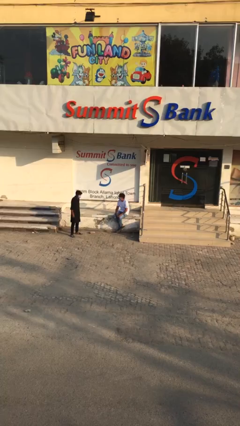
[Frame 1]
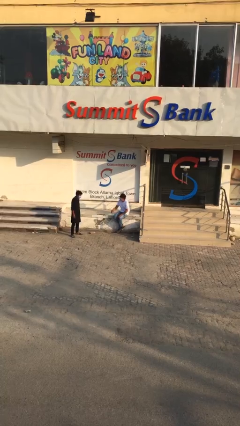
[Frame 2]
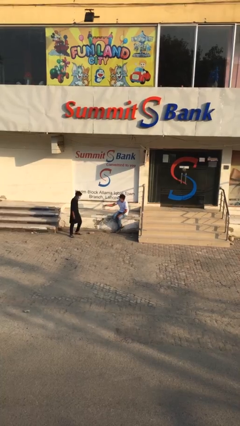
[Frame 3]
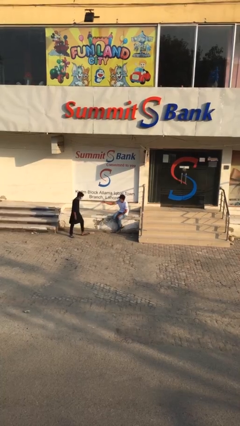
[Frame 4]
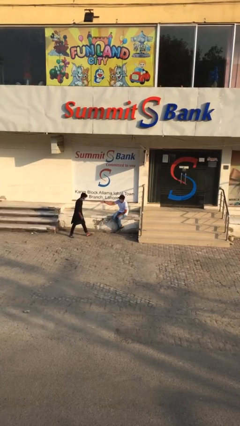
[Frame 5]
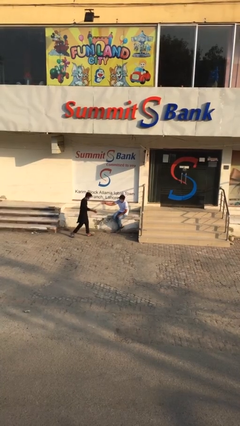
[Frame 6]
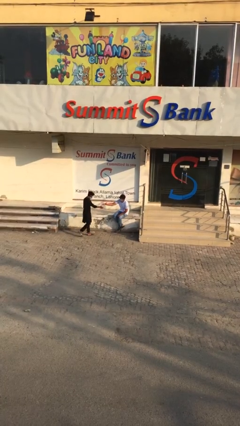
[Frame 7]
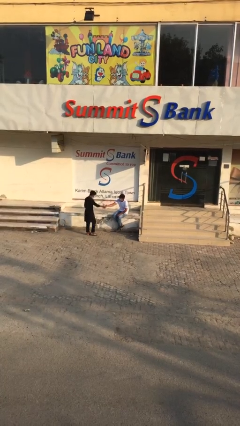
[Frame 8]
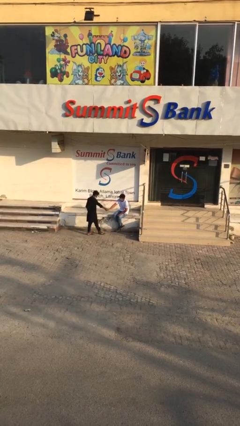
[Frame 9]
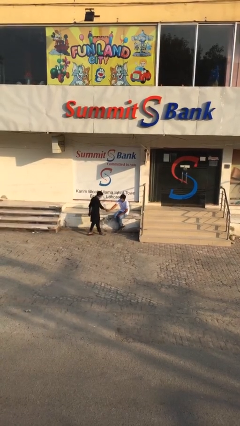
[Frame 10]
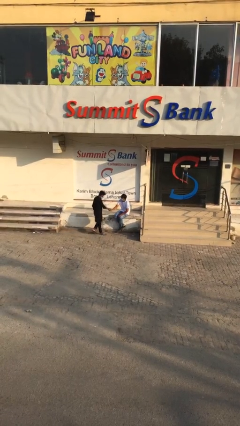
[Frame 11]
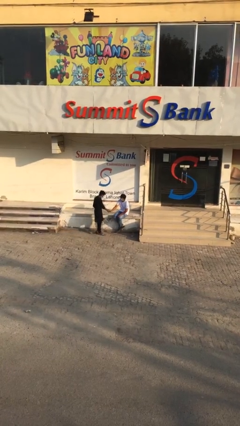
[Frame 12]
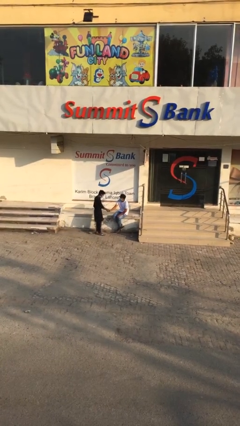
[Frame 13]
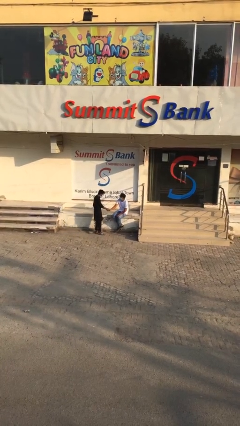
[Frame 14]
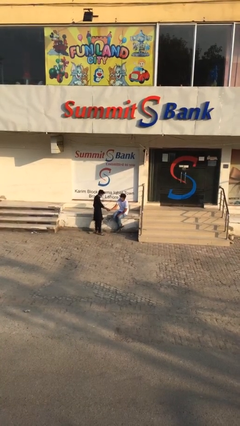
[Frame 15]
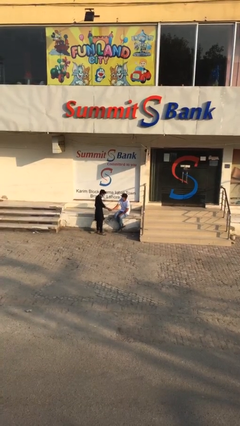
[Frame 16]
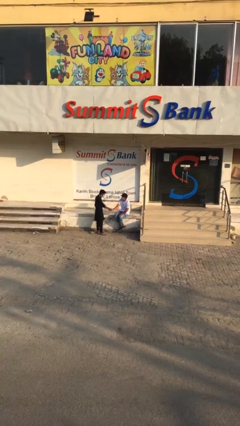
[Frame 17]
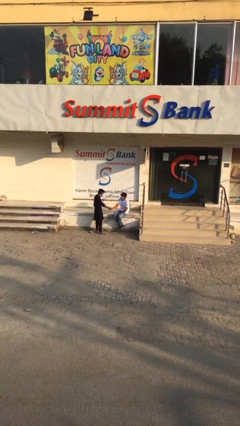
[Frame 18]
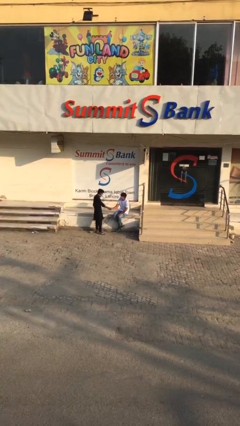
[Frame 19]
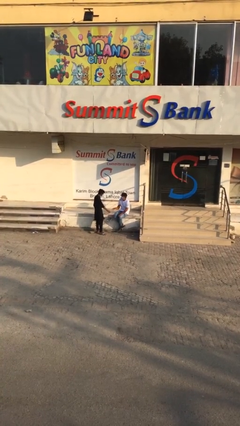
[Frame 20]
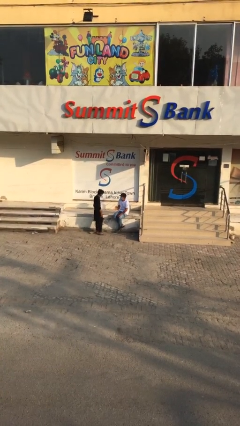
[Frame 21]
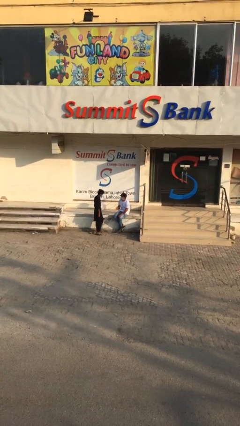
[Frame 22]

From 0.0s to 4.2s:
person shakes hand

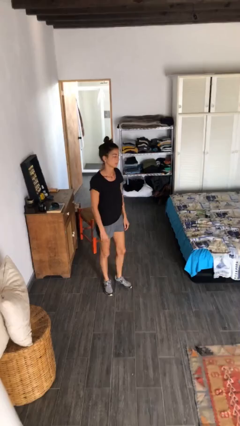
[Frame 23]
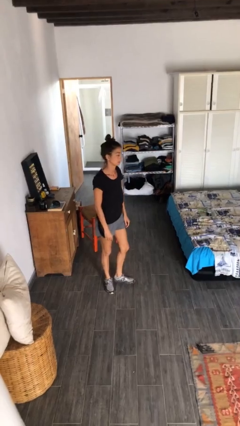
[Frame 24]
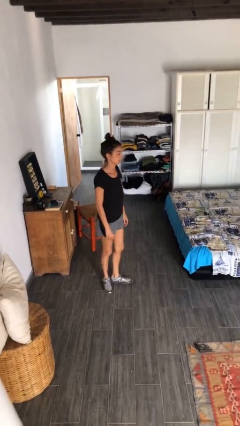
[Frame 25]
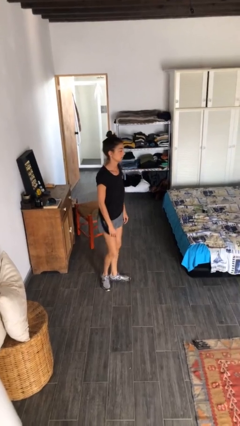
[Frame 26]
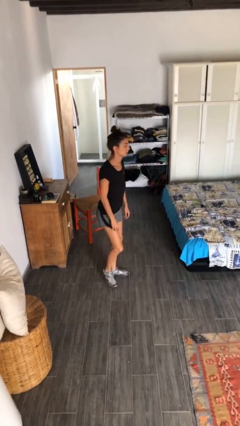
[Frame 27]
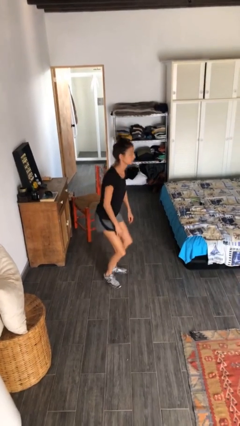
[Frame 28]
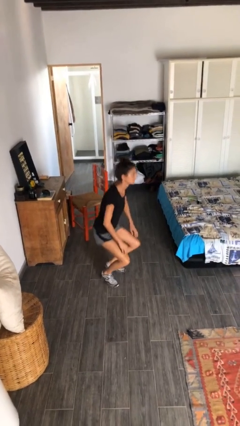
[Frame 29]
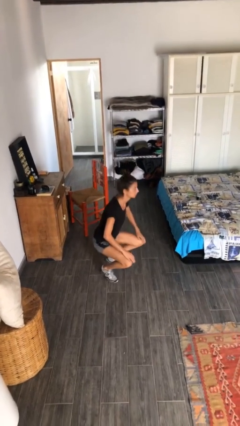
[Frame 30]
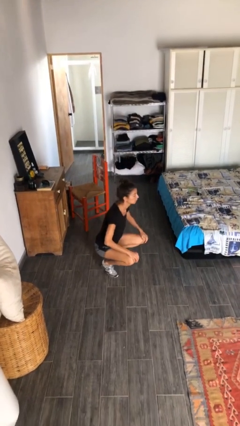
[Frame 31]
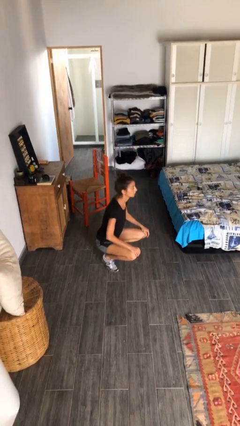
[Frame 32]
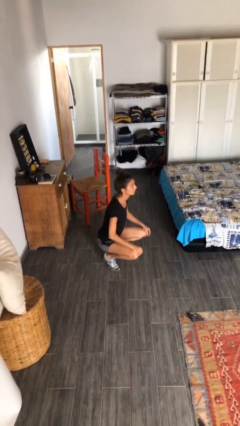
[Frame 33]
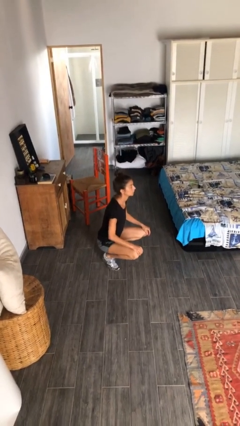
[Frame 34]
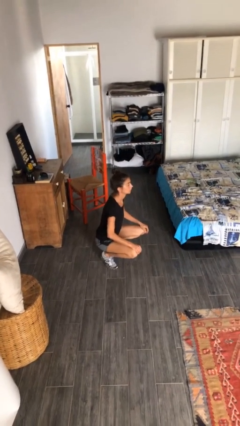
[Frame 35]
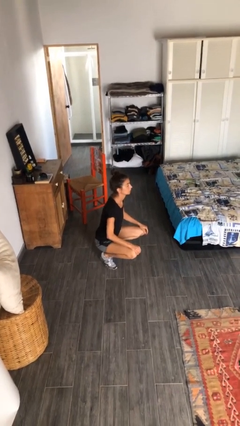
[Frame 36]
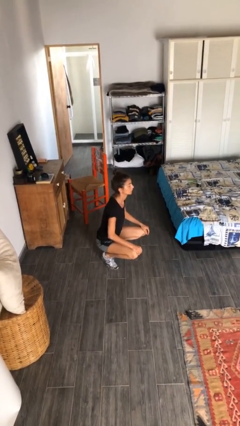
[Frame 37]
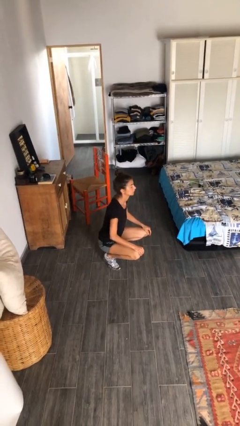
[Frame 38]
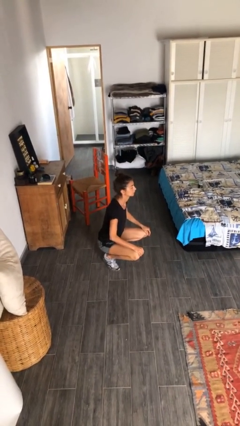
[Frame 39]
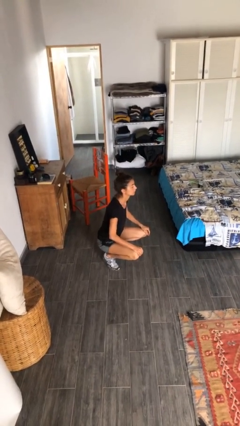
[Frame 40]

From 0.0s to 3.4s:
person squats

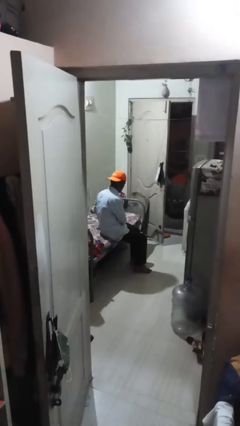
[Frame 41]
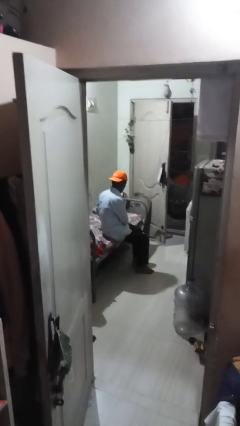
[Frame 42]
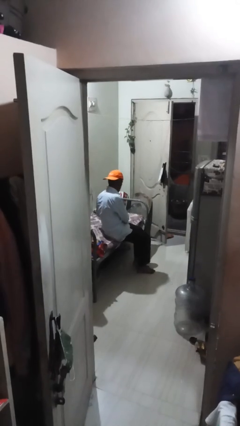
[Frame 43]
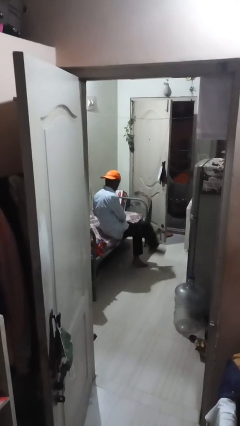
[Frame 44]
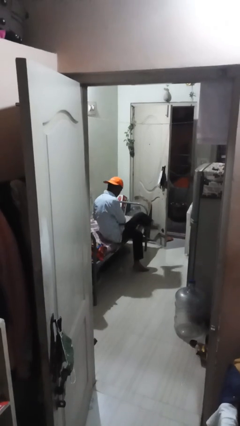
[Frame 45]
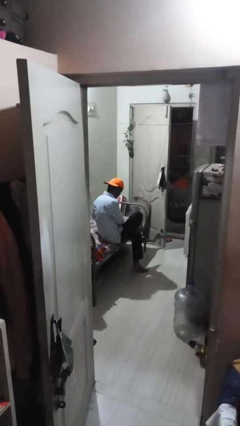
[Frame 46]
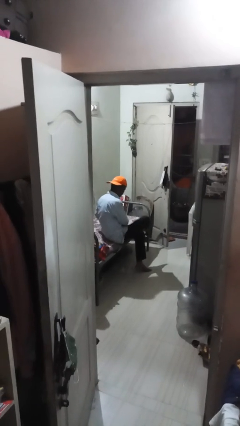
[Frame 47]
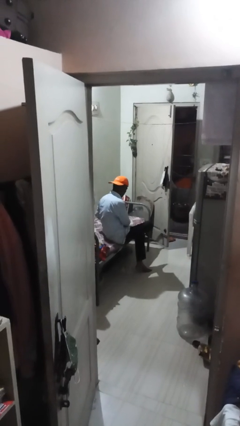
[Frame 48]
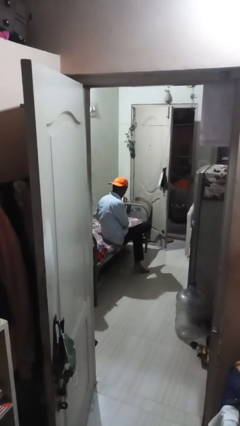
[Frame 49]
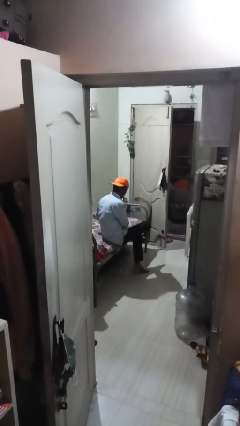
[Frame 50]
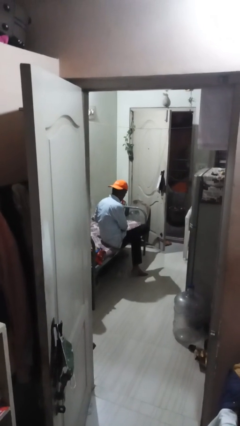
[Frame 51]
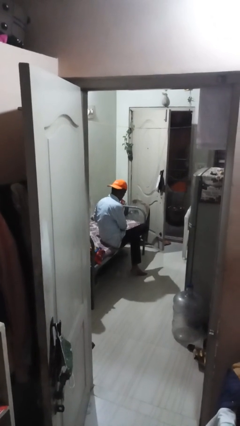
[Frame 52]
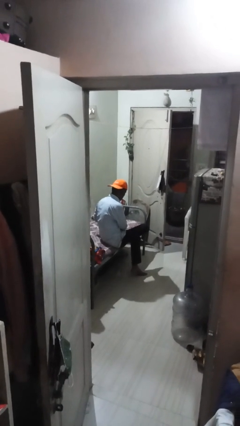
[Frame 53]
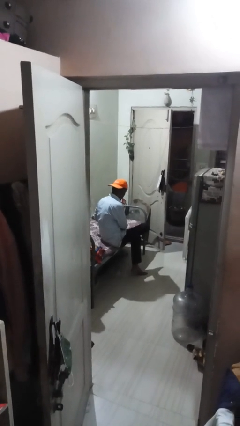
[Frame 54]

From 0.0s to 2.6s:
person crosses legs

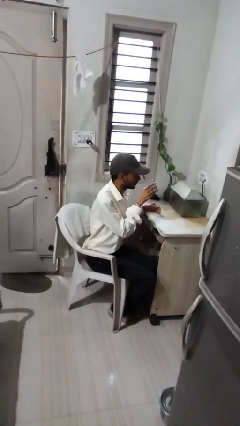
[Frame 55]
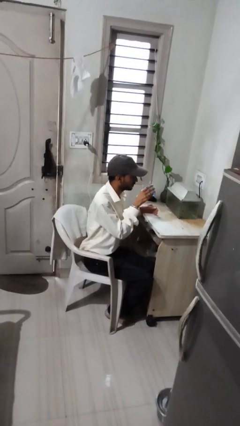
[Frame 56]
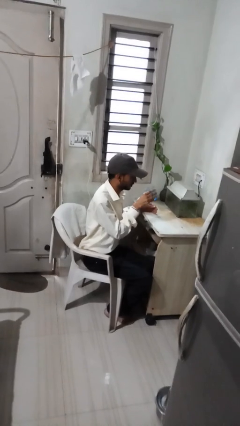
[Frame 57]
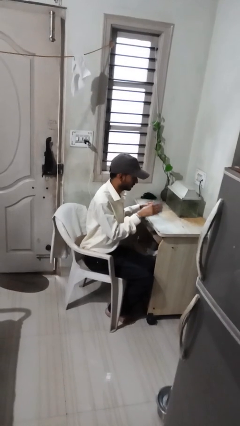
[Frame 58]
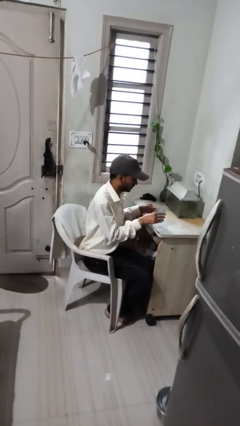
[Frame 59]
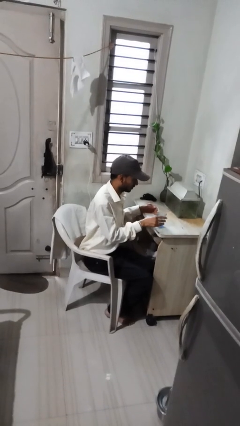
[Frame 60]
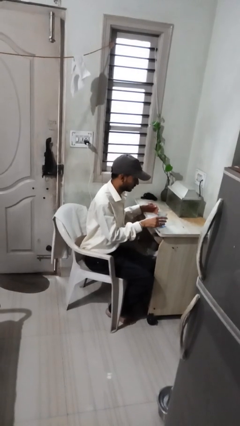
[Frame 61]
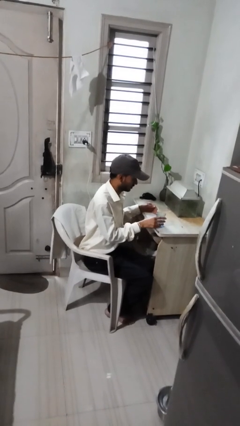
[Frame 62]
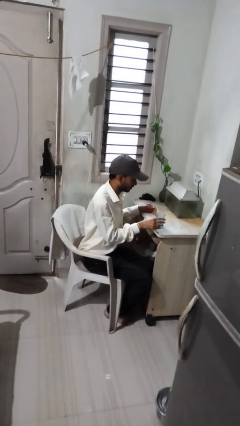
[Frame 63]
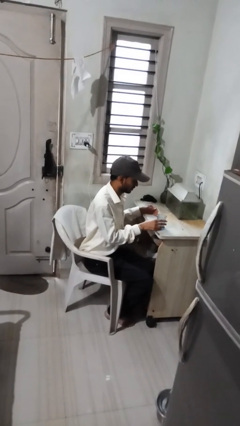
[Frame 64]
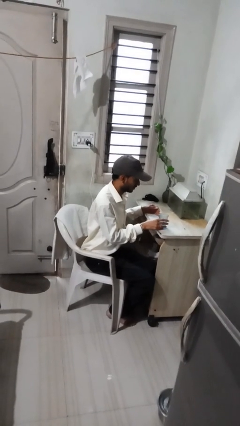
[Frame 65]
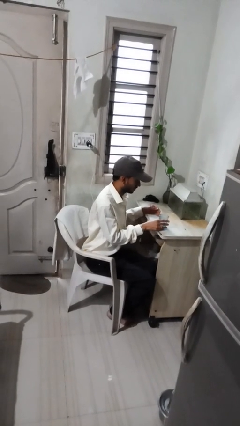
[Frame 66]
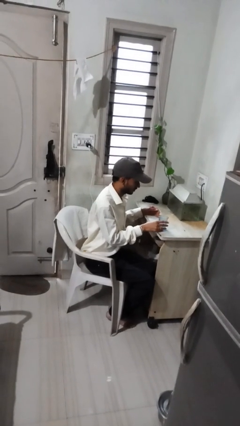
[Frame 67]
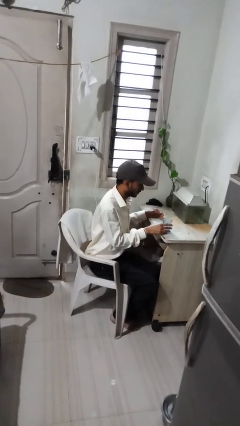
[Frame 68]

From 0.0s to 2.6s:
person puts down object on table

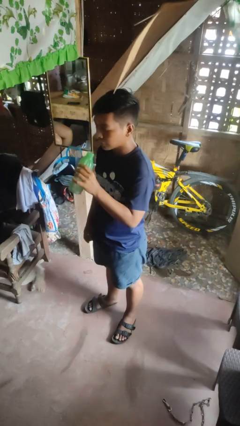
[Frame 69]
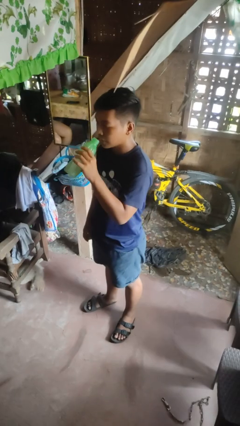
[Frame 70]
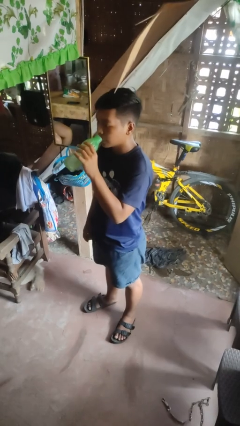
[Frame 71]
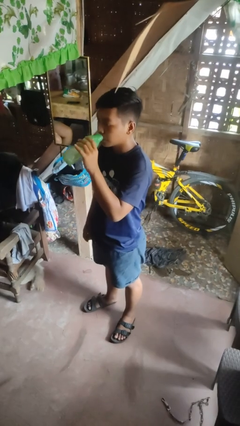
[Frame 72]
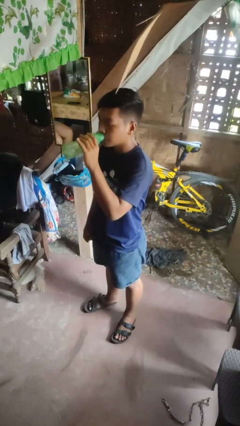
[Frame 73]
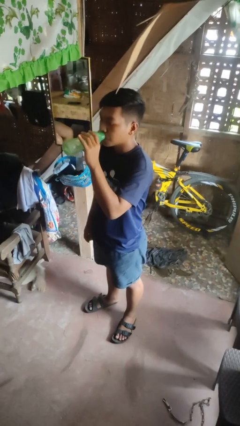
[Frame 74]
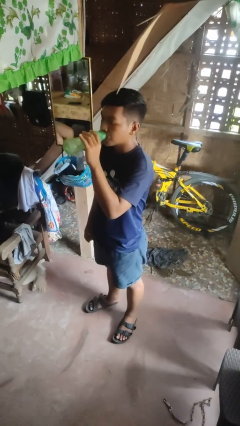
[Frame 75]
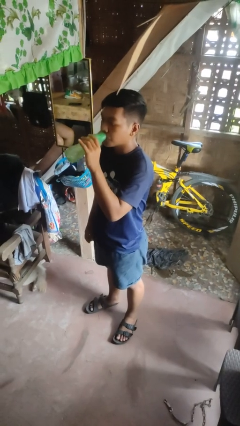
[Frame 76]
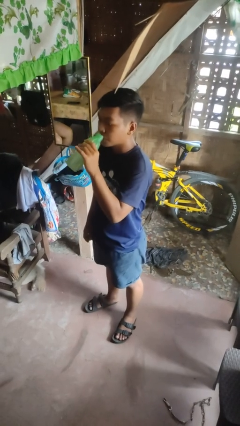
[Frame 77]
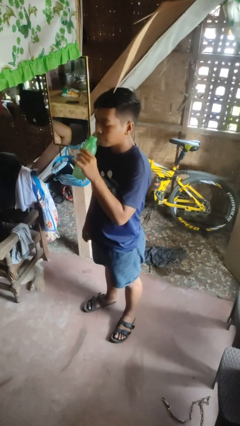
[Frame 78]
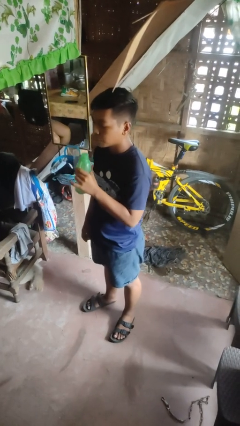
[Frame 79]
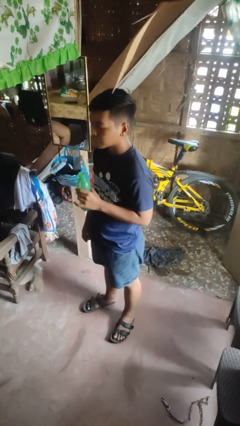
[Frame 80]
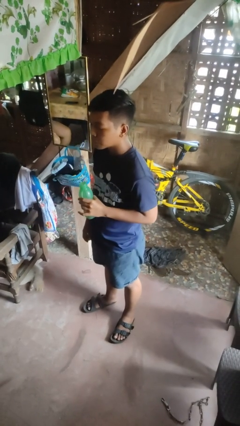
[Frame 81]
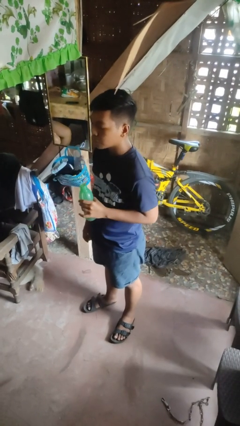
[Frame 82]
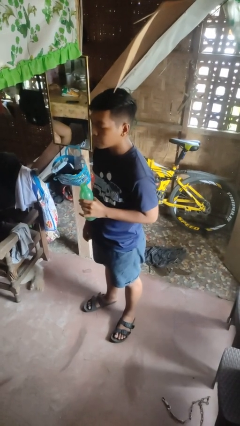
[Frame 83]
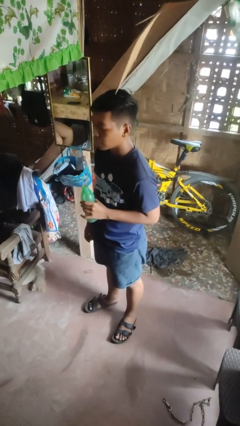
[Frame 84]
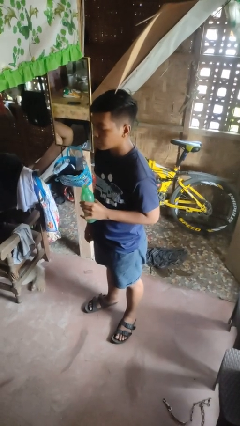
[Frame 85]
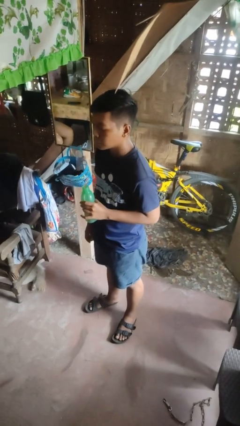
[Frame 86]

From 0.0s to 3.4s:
person drinks from bottle

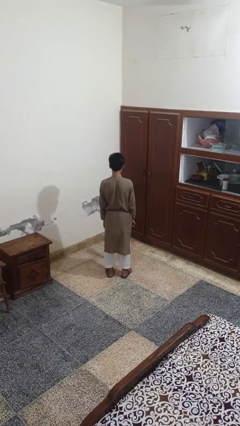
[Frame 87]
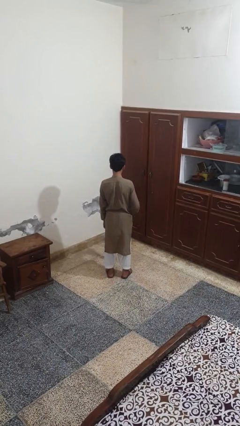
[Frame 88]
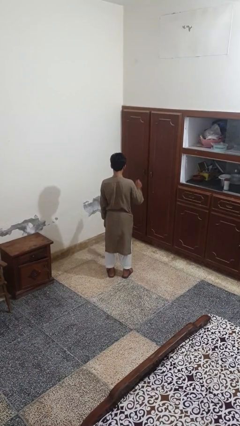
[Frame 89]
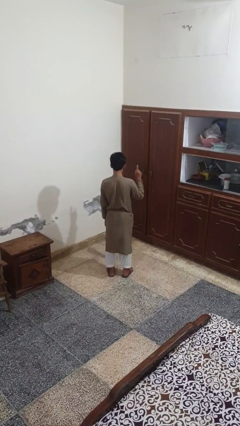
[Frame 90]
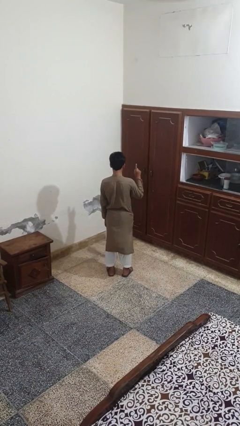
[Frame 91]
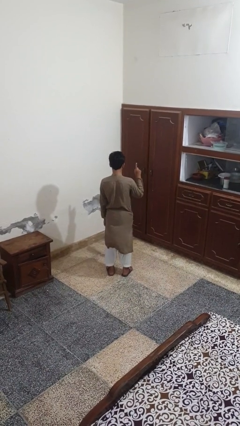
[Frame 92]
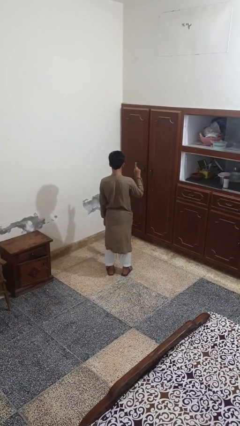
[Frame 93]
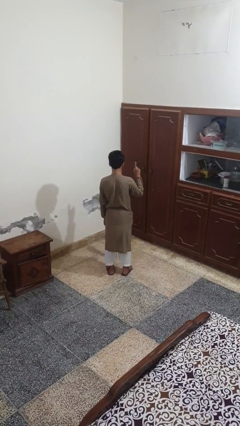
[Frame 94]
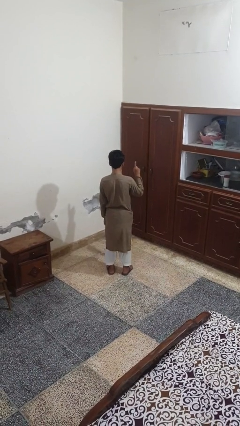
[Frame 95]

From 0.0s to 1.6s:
person gestures number one
